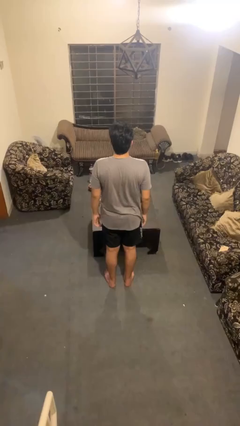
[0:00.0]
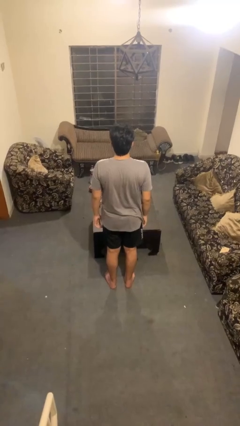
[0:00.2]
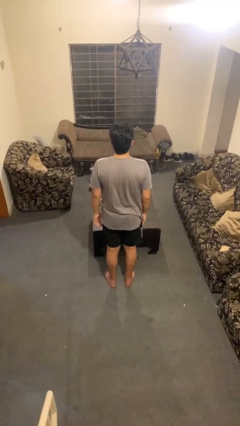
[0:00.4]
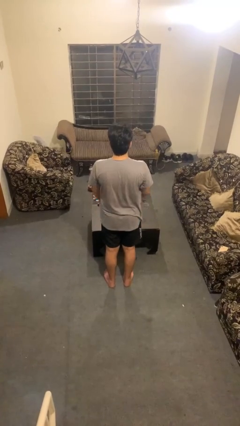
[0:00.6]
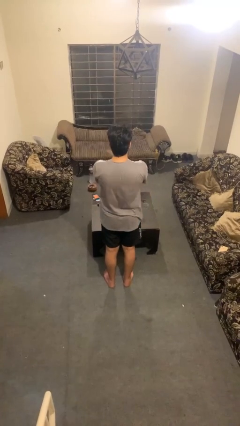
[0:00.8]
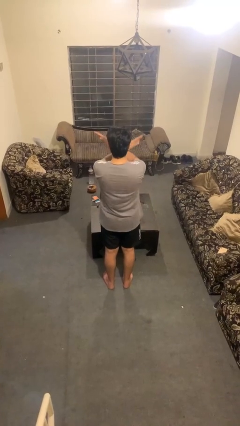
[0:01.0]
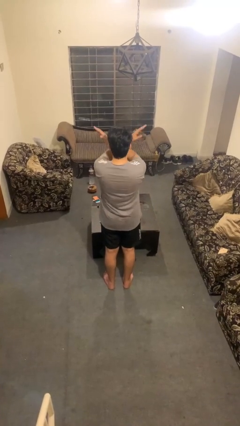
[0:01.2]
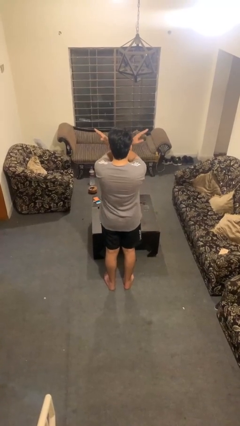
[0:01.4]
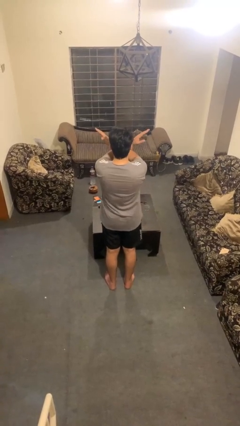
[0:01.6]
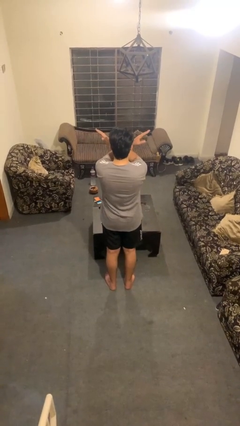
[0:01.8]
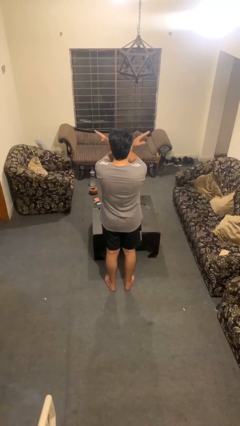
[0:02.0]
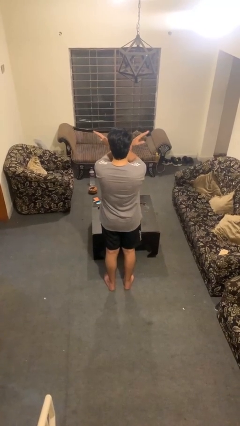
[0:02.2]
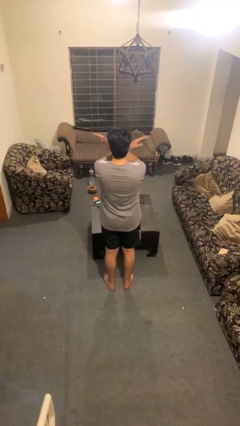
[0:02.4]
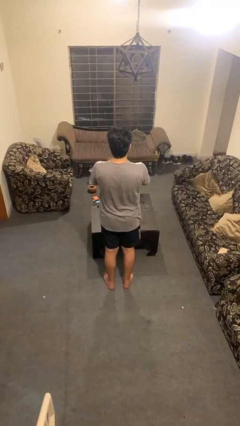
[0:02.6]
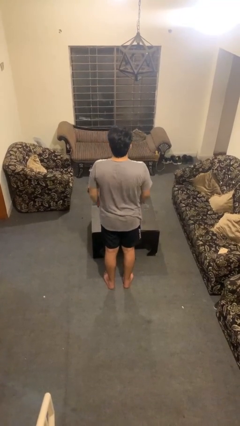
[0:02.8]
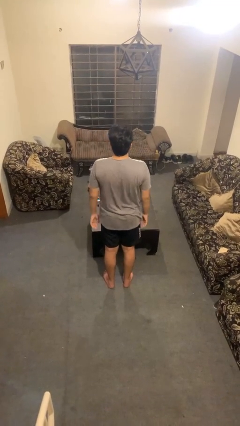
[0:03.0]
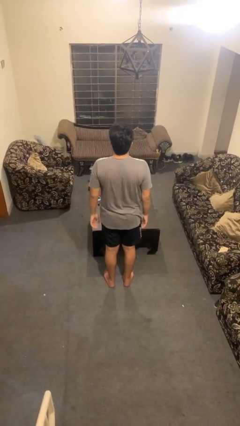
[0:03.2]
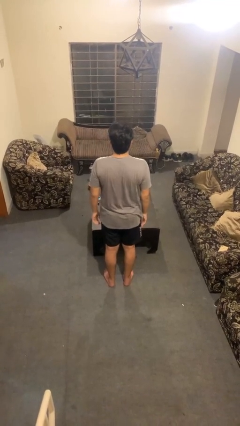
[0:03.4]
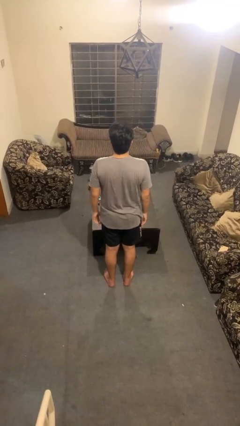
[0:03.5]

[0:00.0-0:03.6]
person gestures arms x

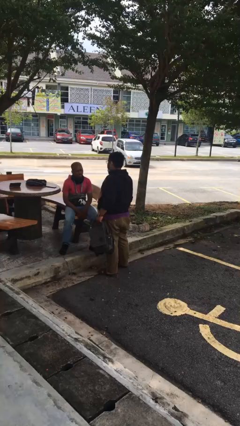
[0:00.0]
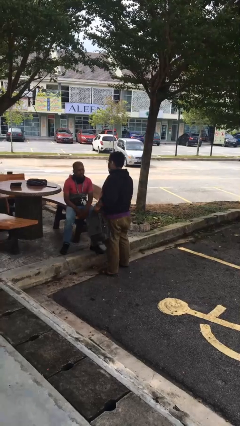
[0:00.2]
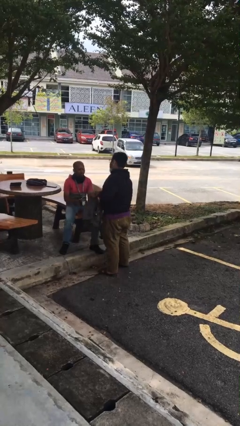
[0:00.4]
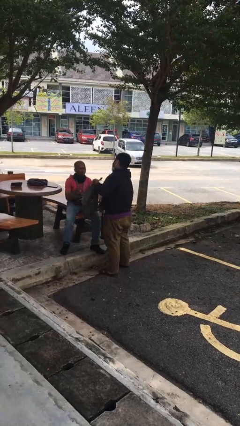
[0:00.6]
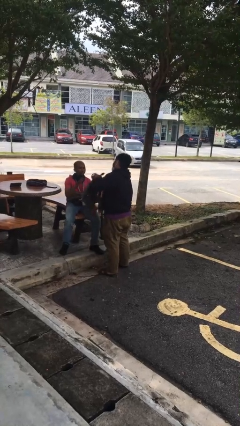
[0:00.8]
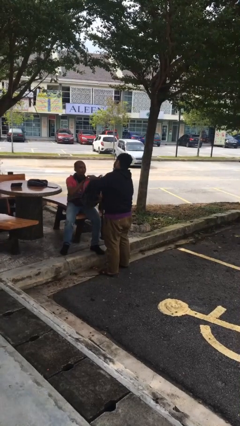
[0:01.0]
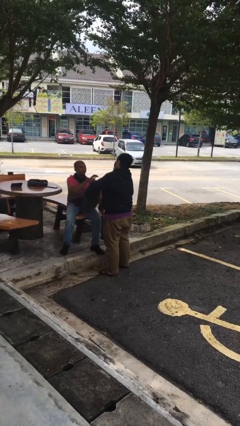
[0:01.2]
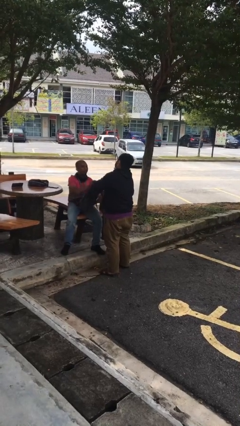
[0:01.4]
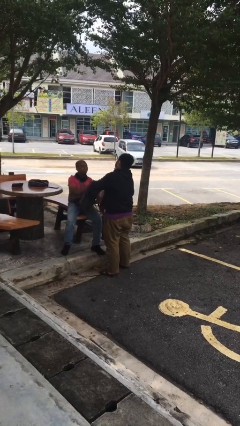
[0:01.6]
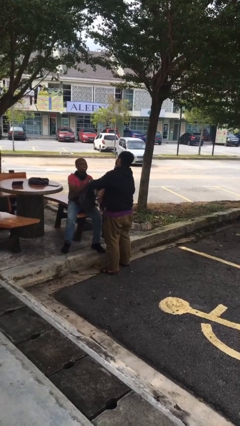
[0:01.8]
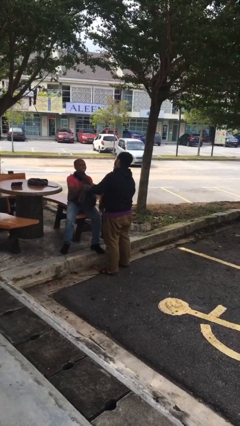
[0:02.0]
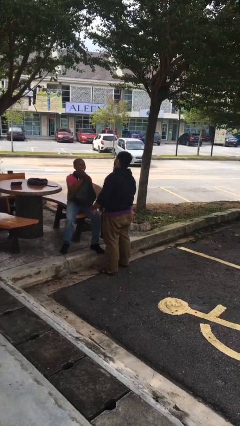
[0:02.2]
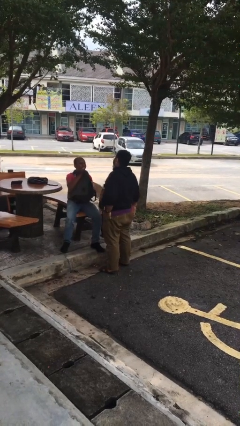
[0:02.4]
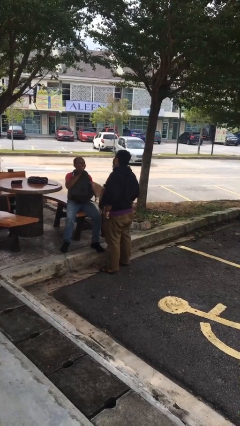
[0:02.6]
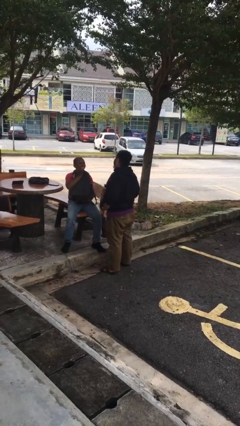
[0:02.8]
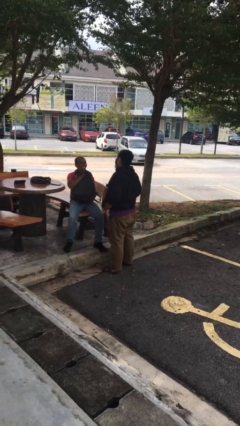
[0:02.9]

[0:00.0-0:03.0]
person transfers object to person

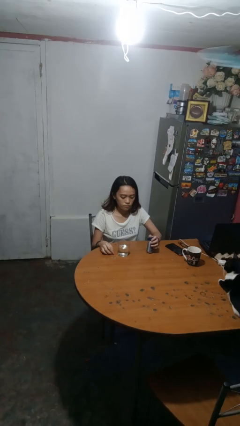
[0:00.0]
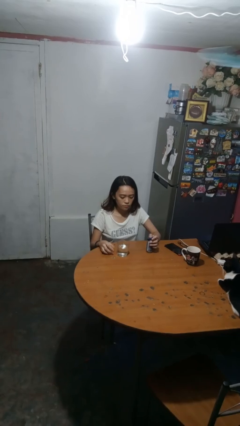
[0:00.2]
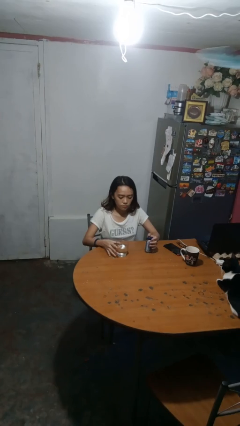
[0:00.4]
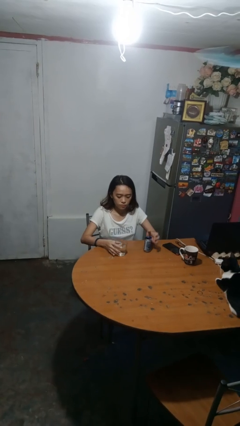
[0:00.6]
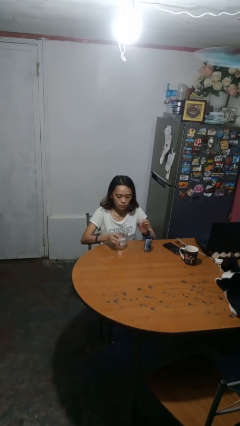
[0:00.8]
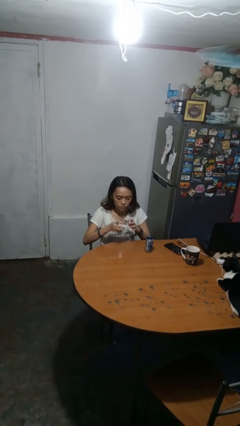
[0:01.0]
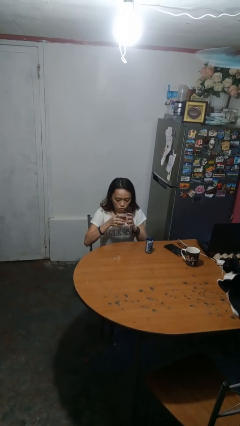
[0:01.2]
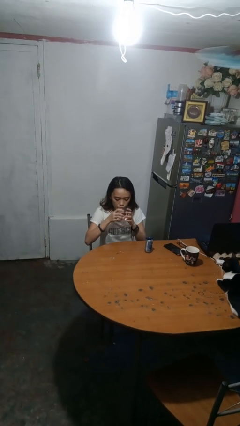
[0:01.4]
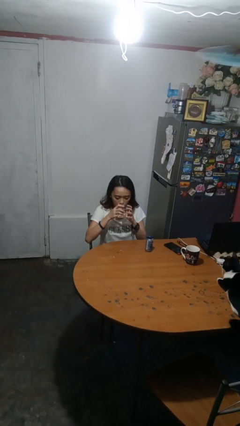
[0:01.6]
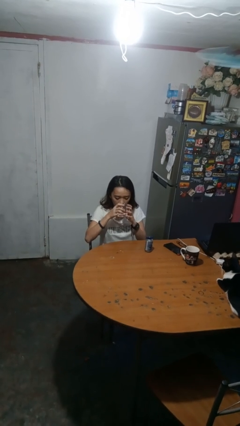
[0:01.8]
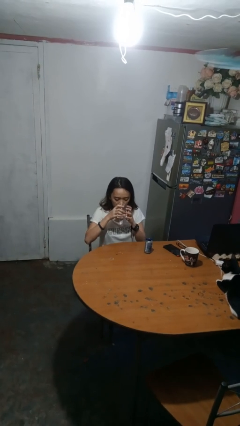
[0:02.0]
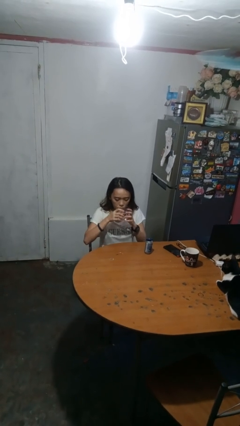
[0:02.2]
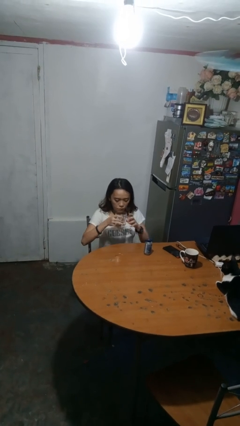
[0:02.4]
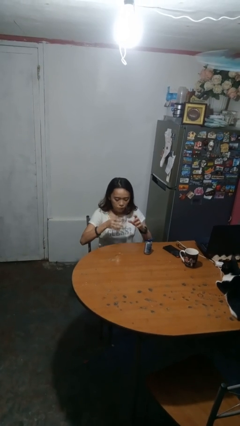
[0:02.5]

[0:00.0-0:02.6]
person drinks from cup

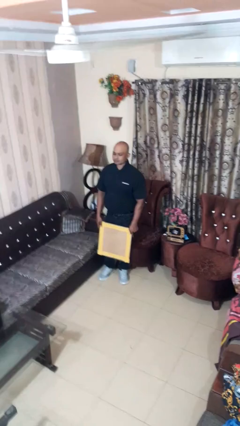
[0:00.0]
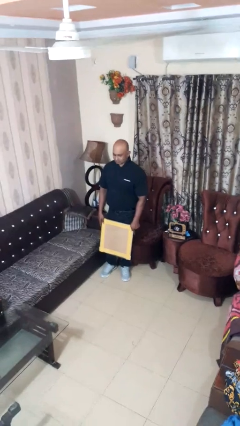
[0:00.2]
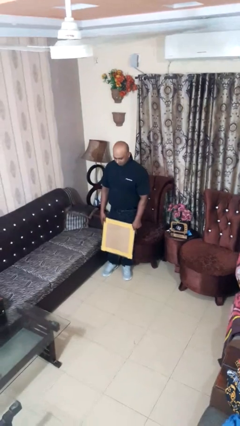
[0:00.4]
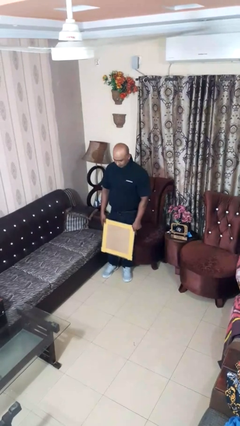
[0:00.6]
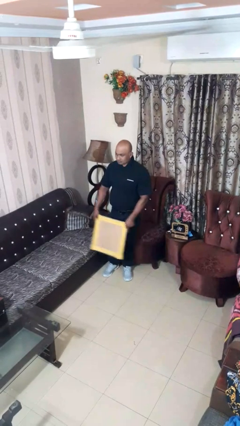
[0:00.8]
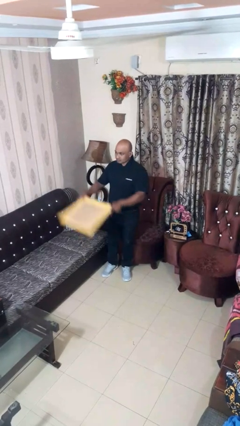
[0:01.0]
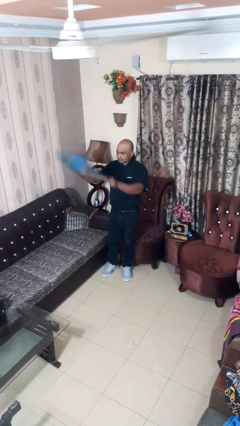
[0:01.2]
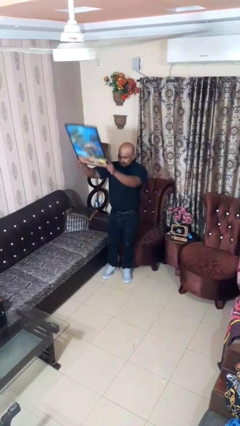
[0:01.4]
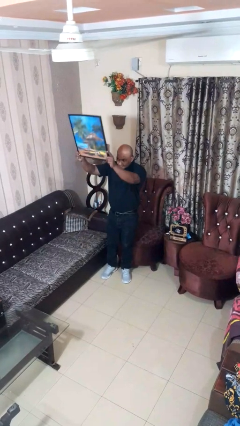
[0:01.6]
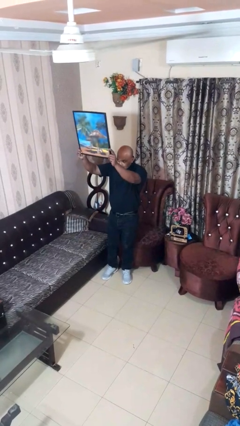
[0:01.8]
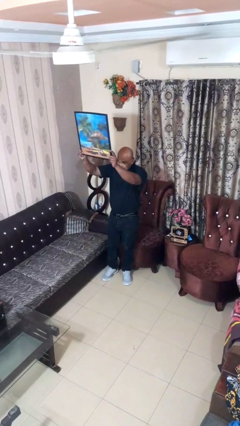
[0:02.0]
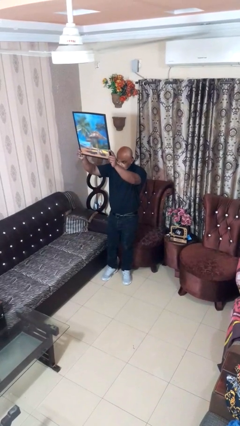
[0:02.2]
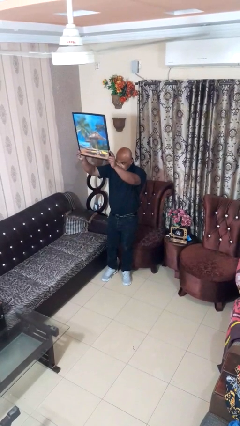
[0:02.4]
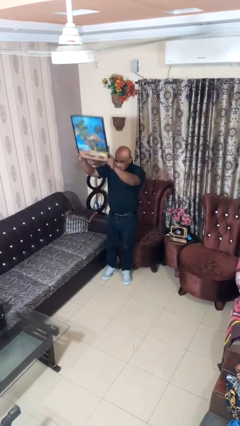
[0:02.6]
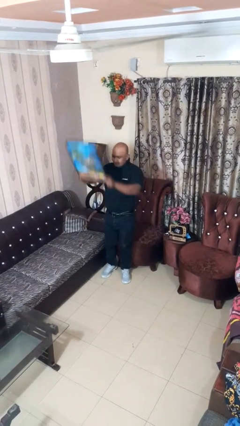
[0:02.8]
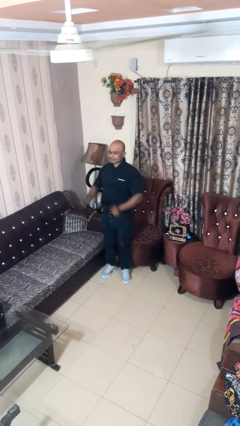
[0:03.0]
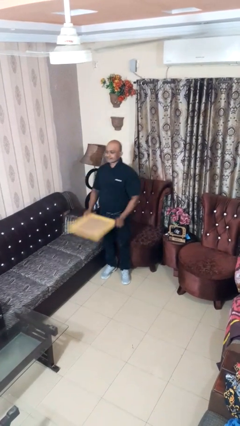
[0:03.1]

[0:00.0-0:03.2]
person holds object above head

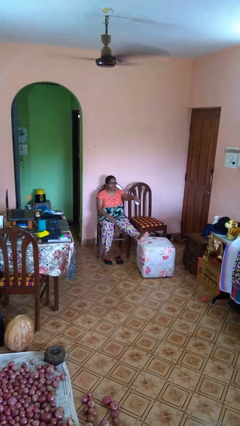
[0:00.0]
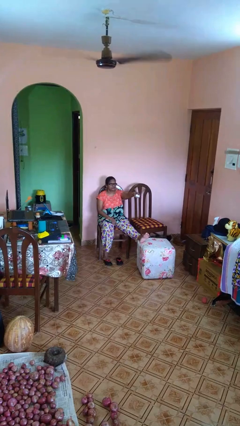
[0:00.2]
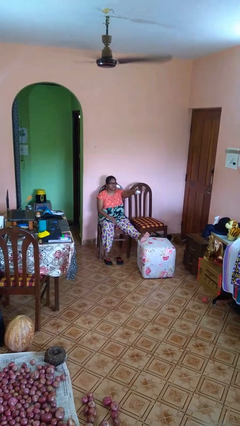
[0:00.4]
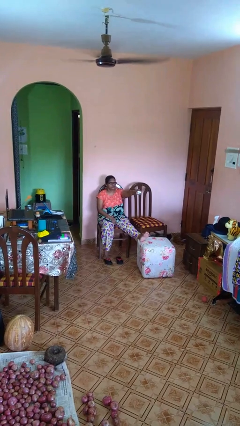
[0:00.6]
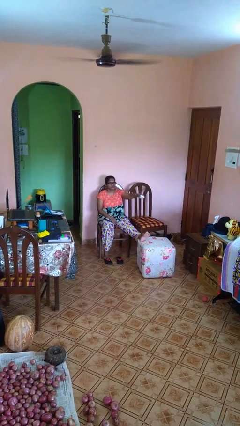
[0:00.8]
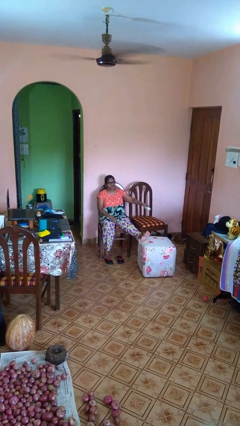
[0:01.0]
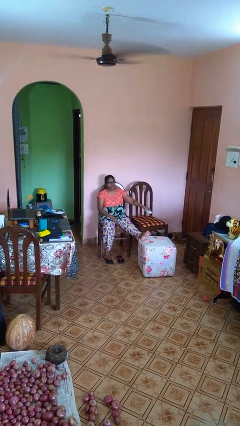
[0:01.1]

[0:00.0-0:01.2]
person uses television remote

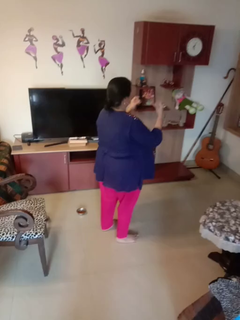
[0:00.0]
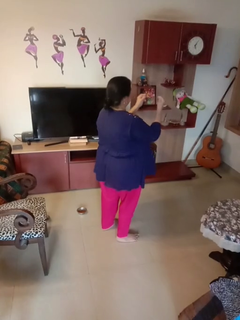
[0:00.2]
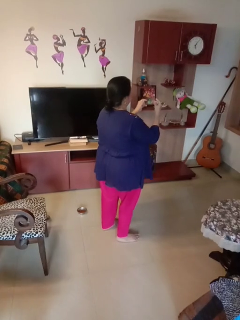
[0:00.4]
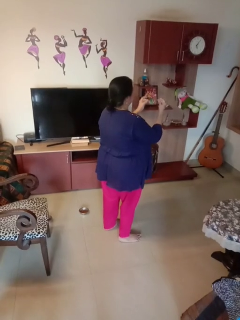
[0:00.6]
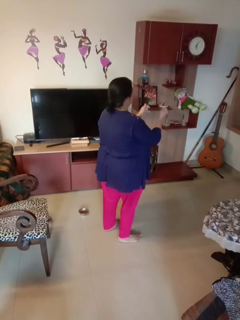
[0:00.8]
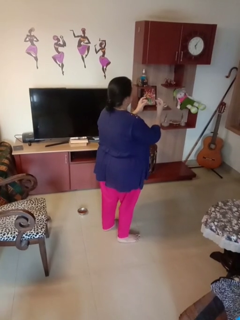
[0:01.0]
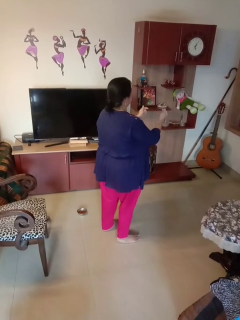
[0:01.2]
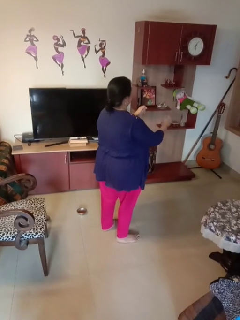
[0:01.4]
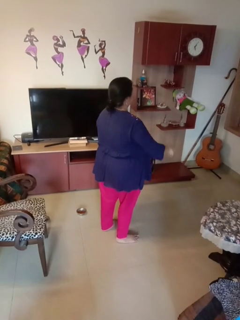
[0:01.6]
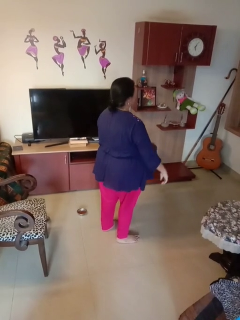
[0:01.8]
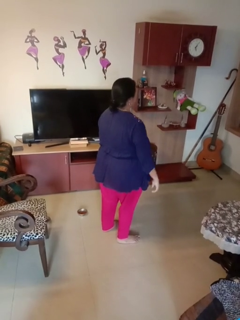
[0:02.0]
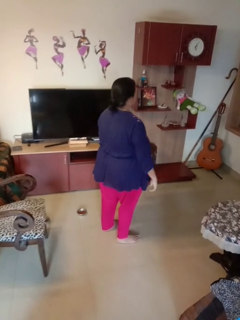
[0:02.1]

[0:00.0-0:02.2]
person snaps fingers

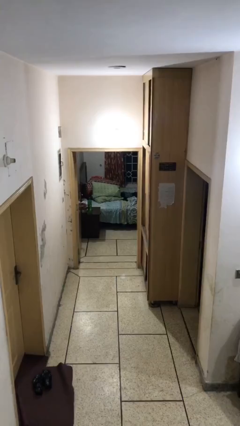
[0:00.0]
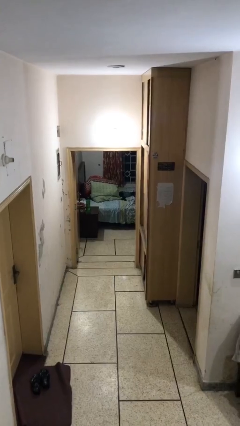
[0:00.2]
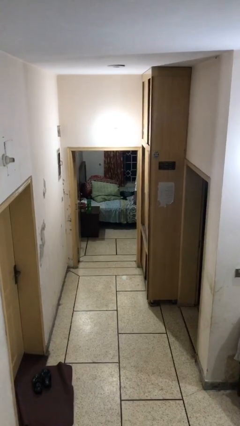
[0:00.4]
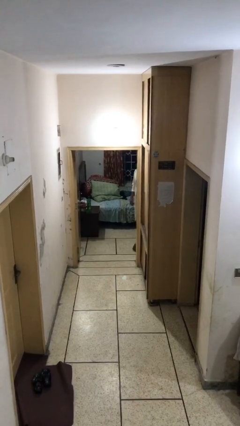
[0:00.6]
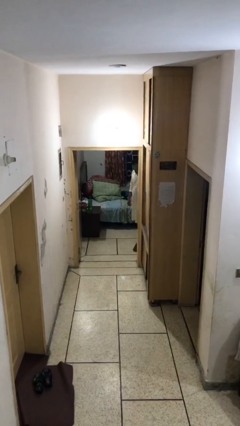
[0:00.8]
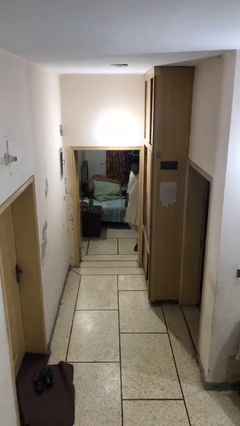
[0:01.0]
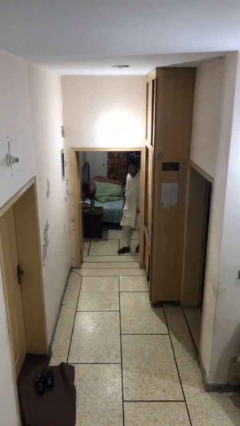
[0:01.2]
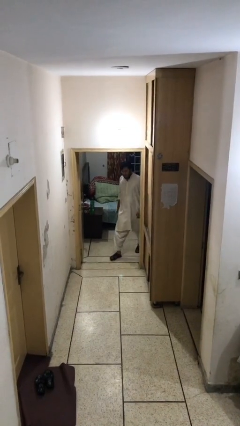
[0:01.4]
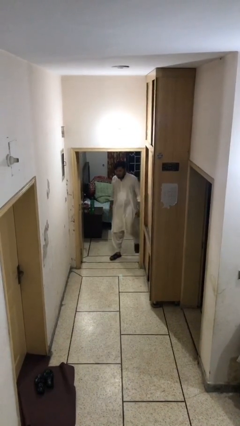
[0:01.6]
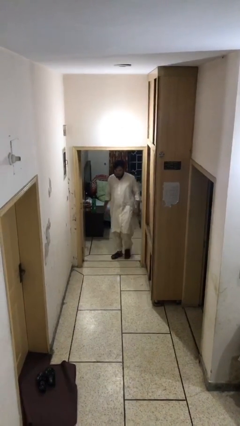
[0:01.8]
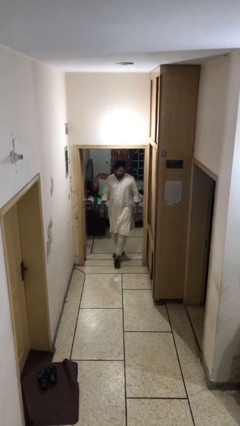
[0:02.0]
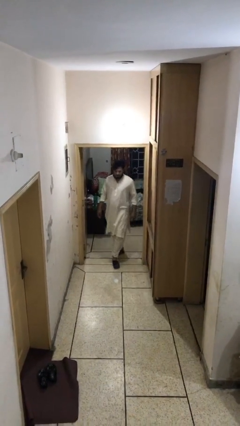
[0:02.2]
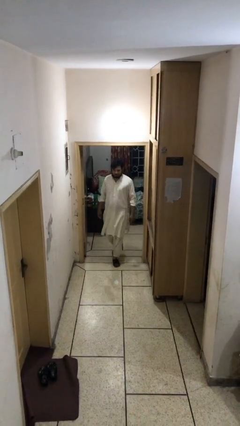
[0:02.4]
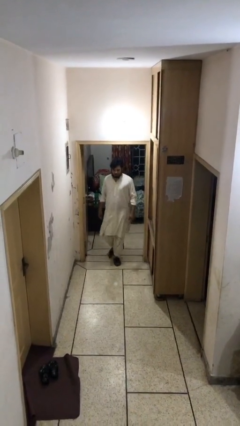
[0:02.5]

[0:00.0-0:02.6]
person enters scene through structure
